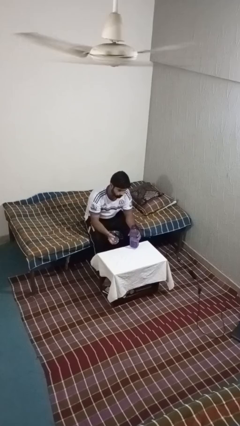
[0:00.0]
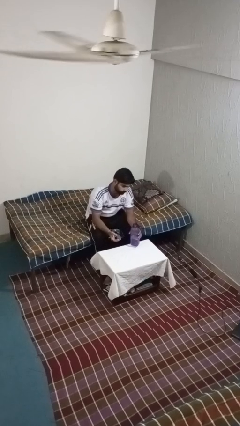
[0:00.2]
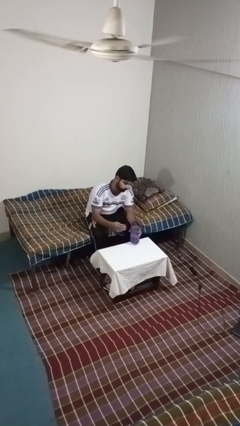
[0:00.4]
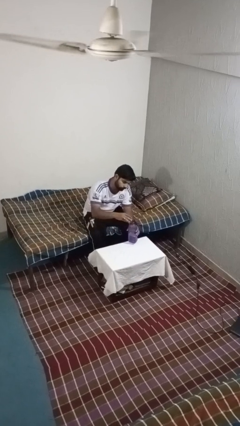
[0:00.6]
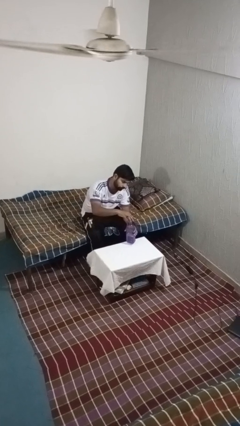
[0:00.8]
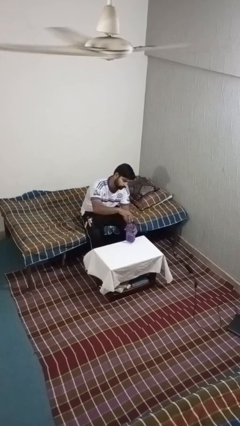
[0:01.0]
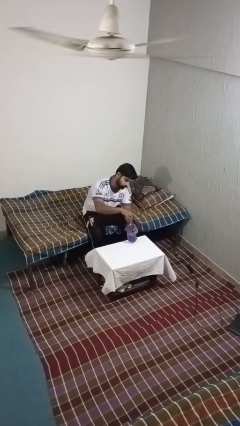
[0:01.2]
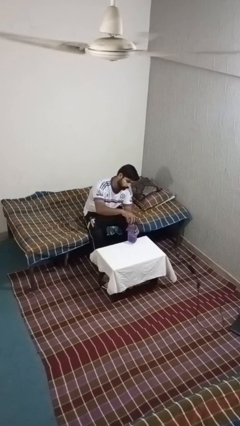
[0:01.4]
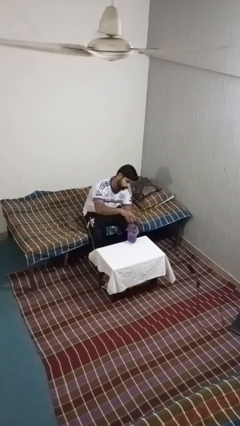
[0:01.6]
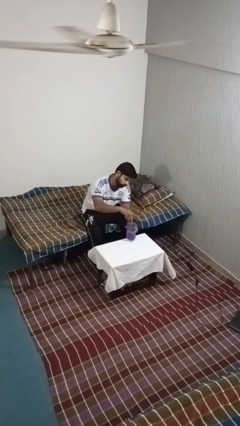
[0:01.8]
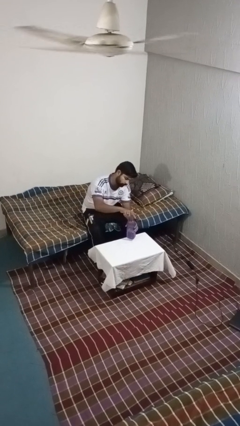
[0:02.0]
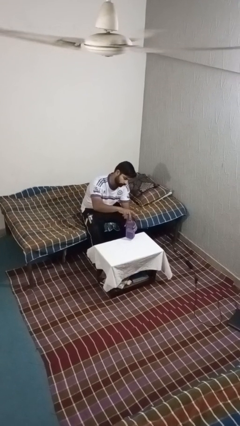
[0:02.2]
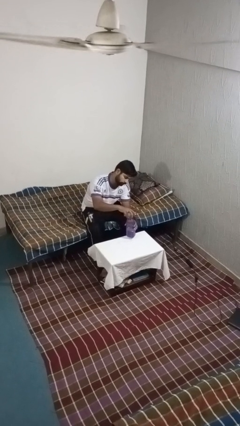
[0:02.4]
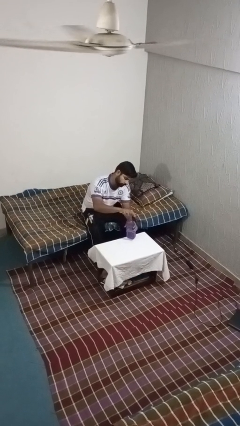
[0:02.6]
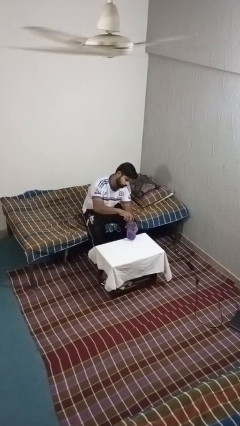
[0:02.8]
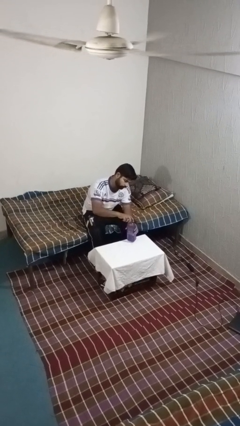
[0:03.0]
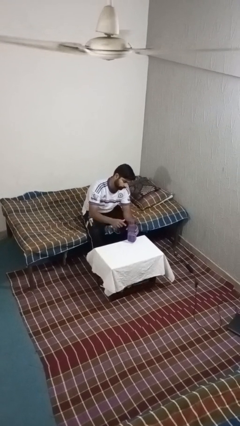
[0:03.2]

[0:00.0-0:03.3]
person screws lid to bottle

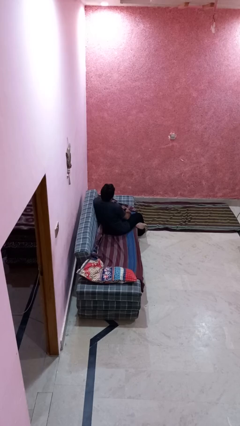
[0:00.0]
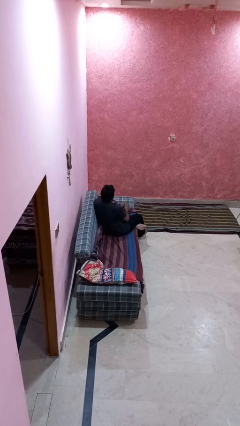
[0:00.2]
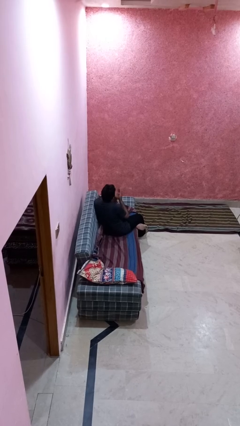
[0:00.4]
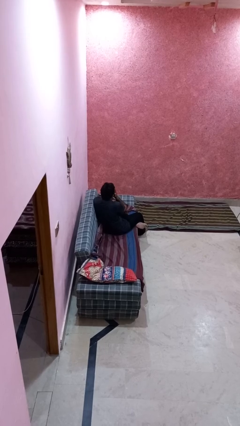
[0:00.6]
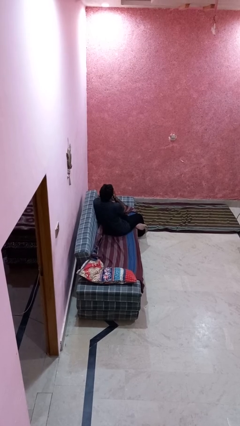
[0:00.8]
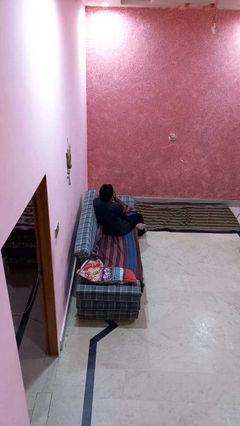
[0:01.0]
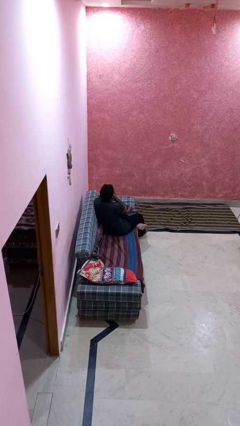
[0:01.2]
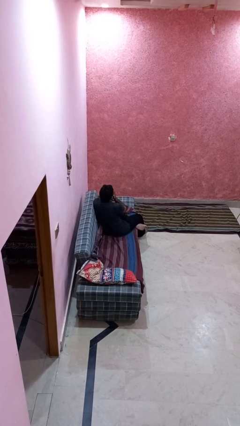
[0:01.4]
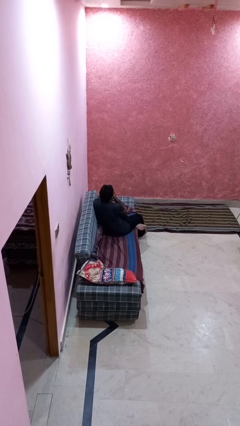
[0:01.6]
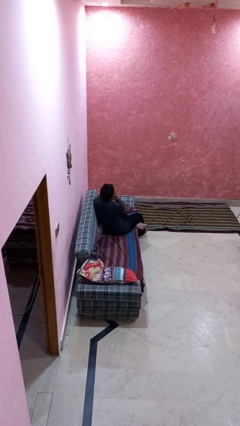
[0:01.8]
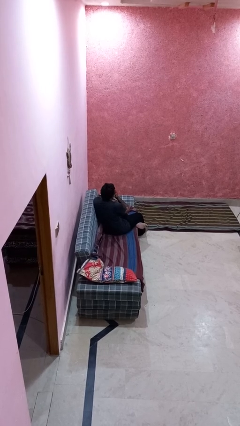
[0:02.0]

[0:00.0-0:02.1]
person covers face with hands

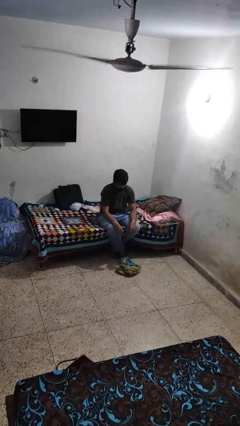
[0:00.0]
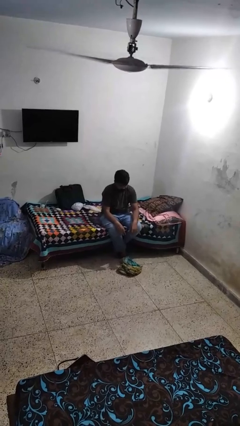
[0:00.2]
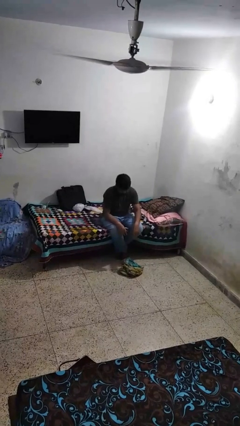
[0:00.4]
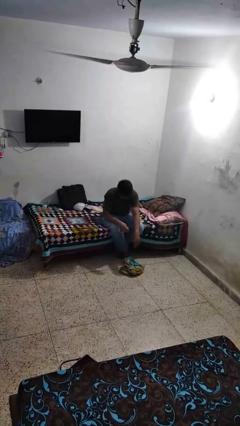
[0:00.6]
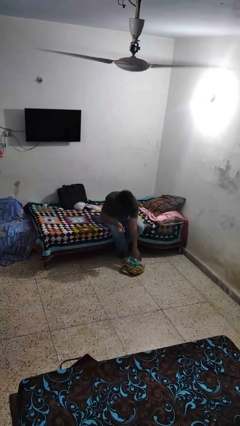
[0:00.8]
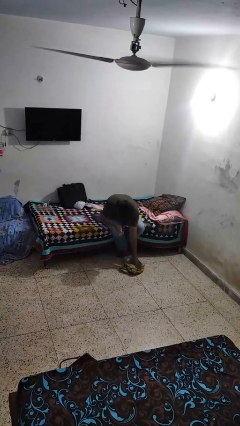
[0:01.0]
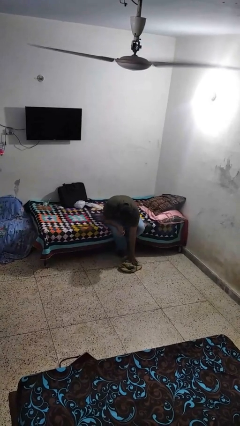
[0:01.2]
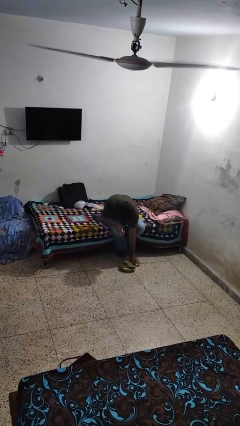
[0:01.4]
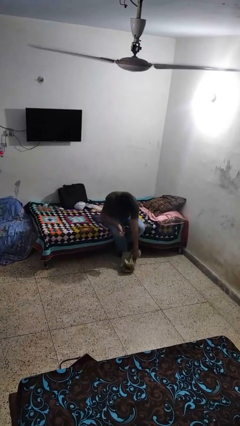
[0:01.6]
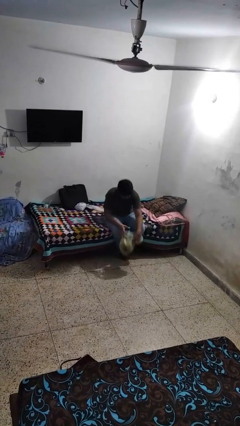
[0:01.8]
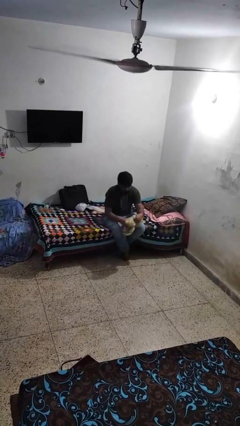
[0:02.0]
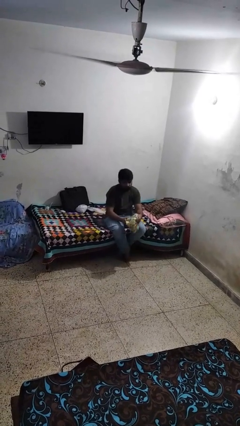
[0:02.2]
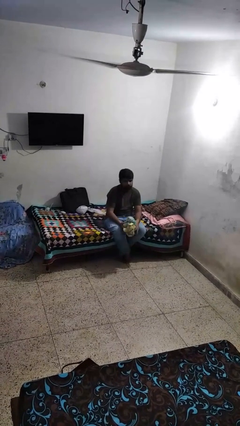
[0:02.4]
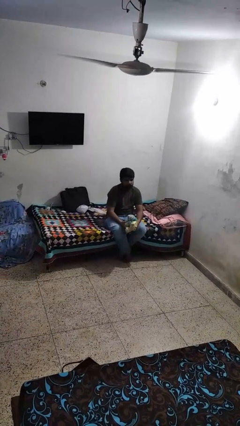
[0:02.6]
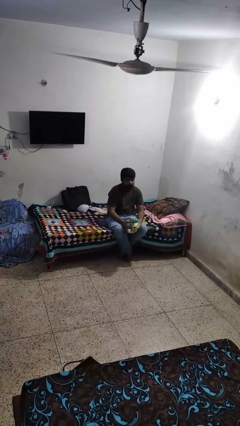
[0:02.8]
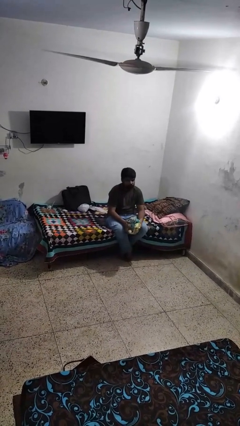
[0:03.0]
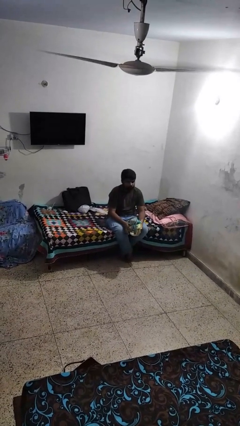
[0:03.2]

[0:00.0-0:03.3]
person picks up object from floor

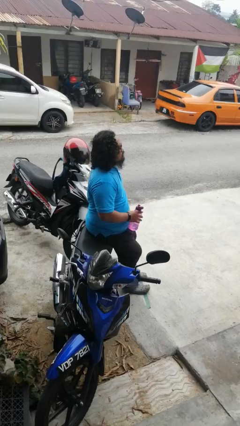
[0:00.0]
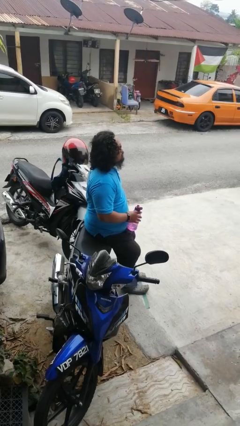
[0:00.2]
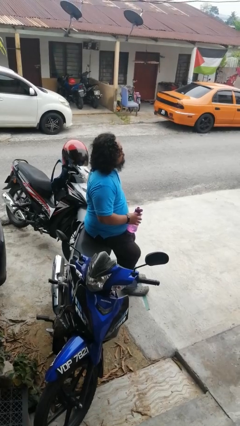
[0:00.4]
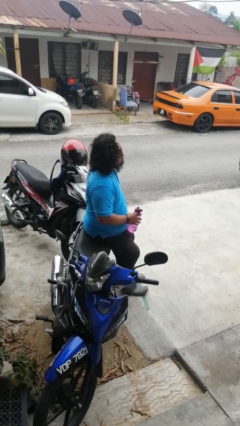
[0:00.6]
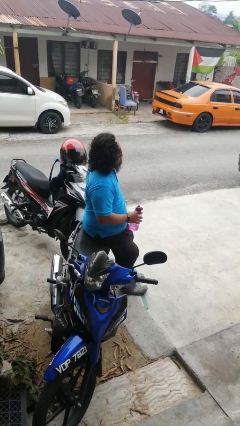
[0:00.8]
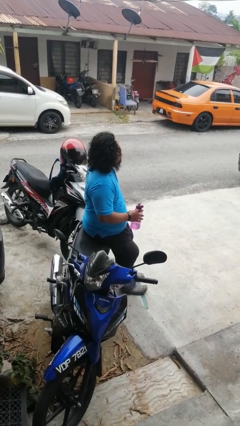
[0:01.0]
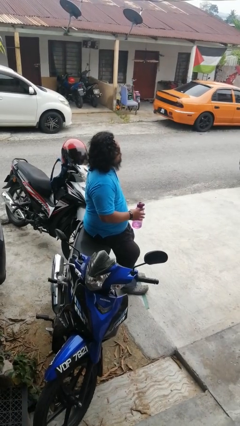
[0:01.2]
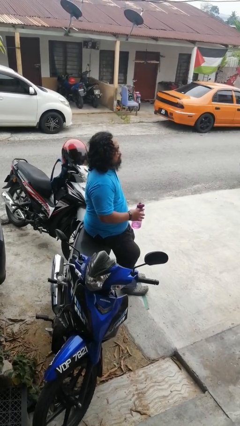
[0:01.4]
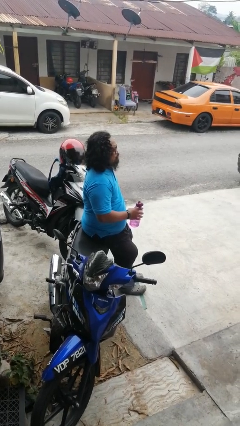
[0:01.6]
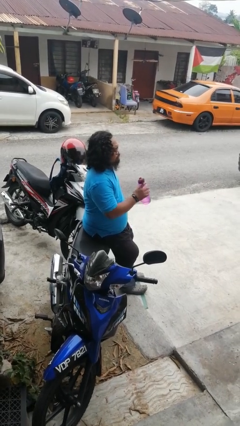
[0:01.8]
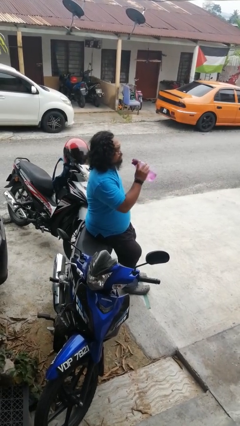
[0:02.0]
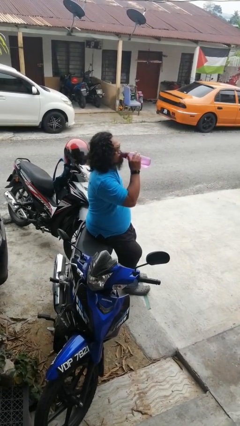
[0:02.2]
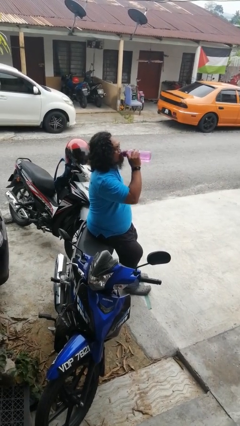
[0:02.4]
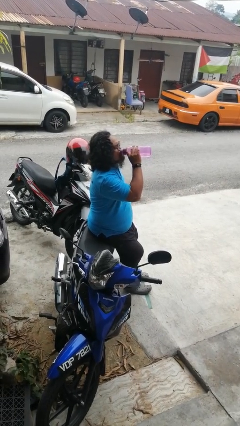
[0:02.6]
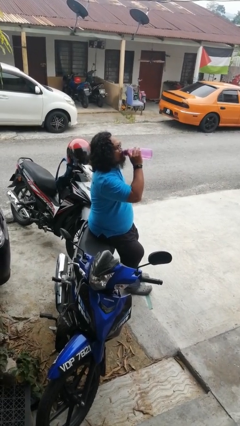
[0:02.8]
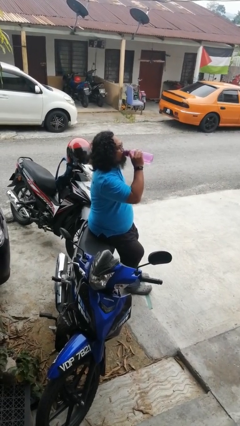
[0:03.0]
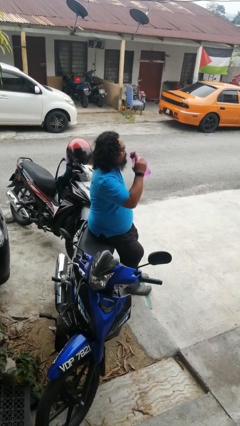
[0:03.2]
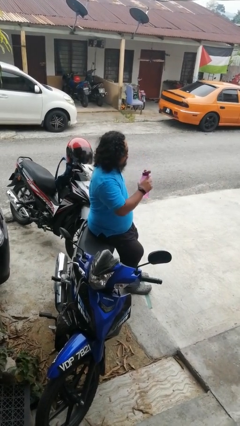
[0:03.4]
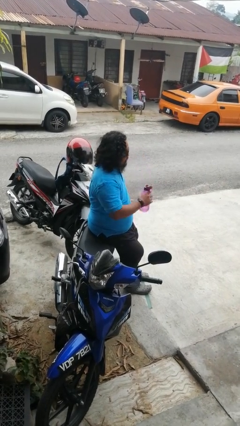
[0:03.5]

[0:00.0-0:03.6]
person drinks from bottle

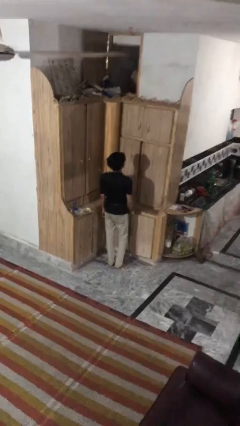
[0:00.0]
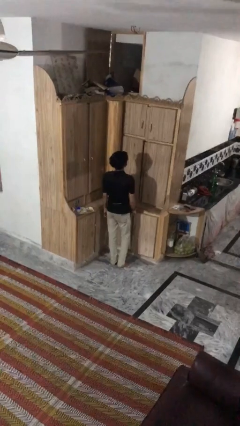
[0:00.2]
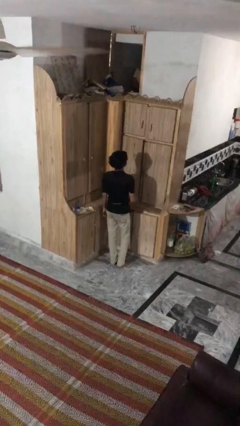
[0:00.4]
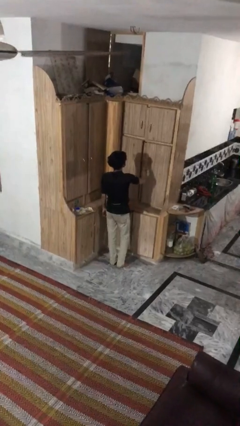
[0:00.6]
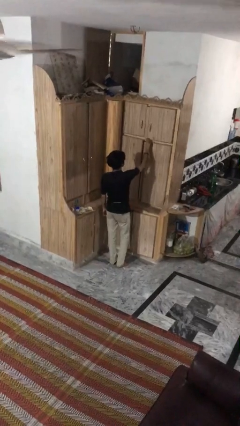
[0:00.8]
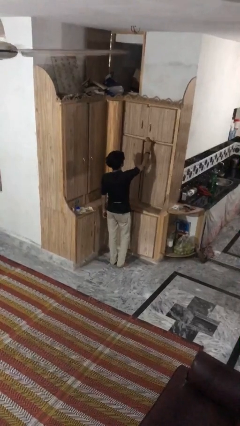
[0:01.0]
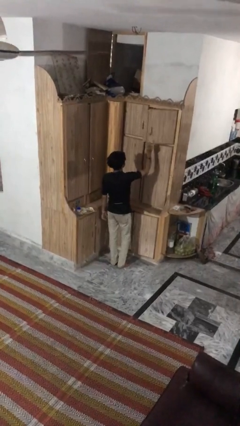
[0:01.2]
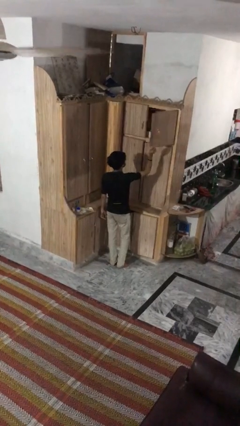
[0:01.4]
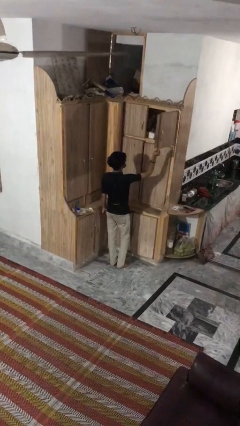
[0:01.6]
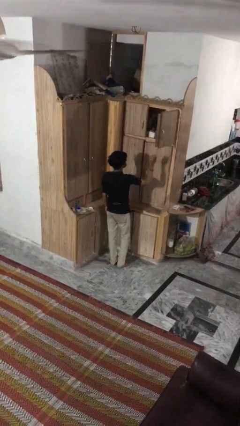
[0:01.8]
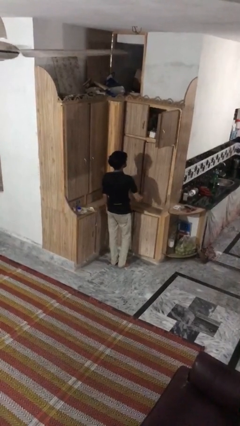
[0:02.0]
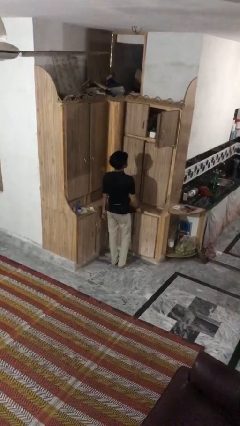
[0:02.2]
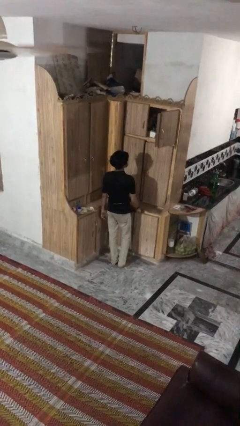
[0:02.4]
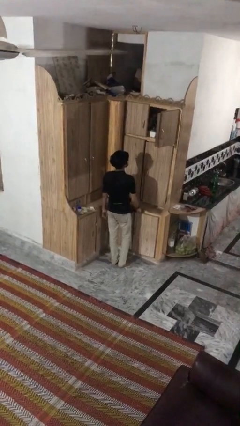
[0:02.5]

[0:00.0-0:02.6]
person opens cabinet

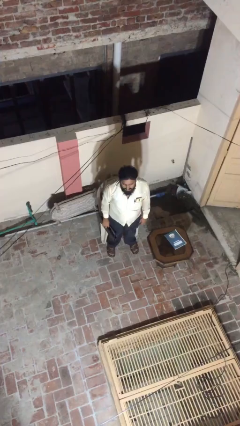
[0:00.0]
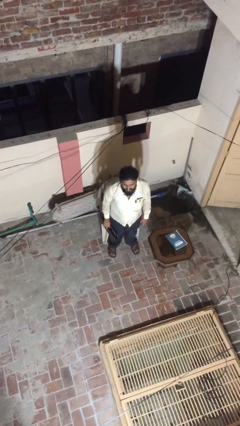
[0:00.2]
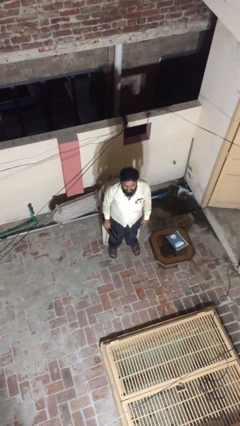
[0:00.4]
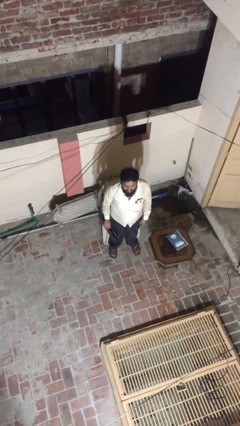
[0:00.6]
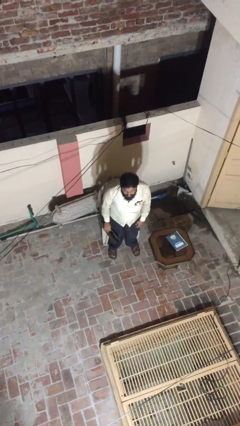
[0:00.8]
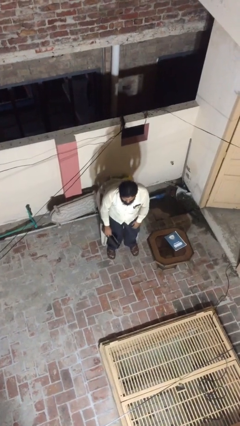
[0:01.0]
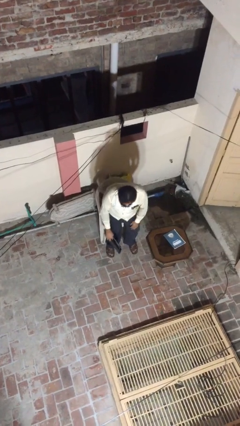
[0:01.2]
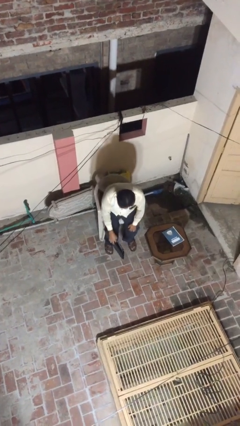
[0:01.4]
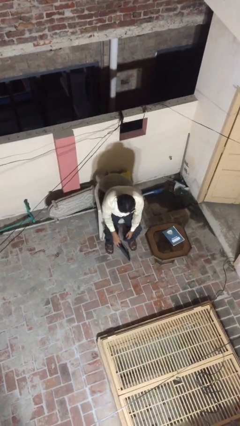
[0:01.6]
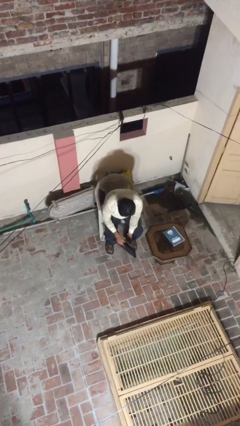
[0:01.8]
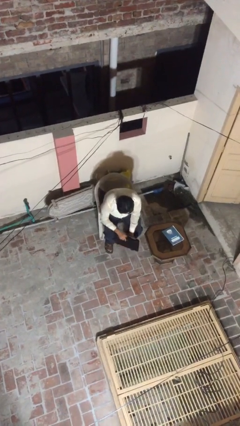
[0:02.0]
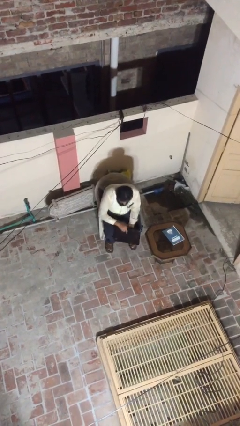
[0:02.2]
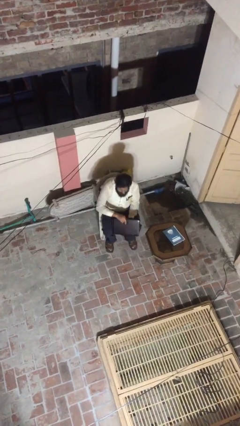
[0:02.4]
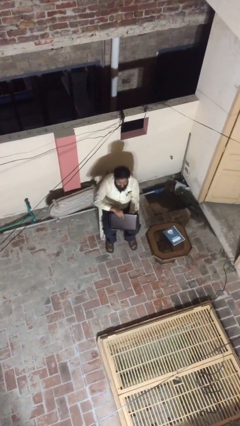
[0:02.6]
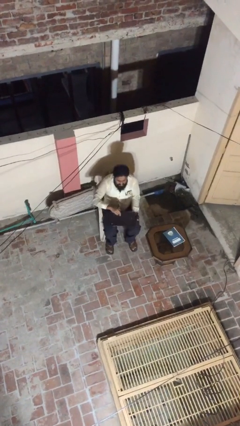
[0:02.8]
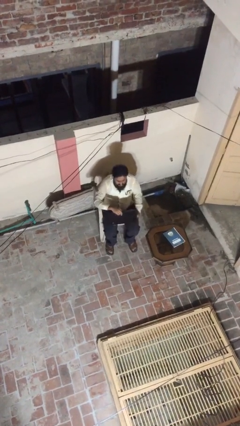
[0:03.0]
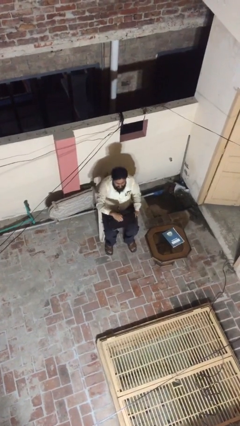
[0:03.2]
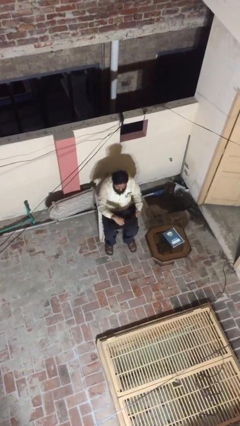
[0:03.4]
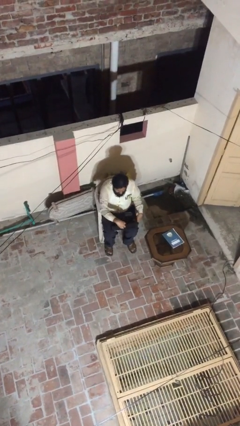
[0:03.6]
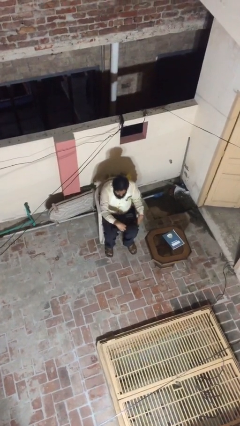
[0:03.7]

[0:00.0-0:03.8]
person sits down
